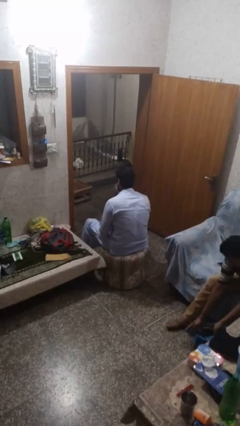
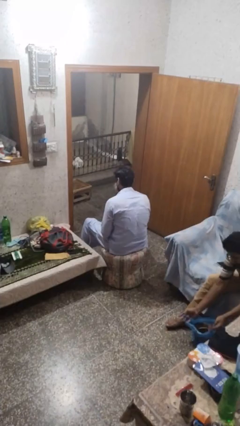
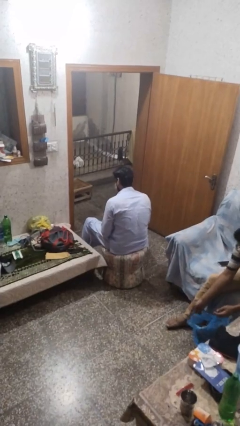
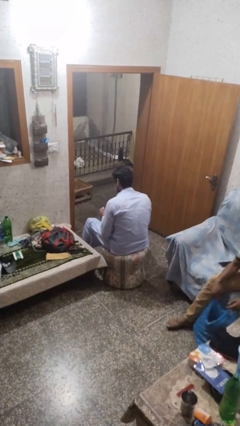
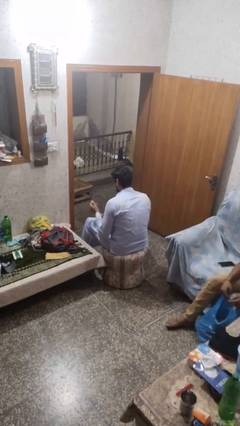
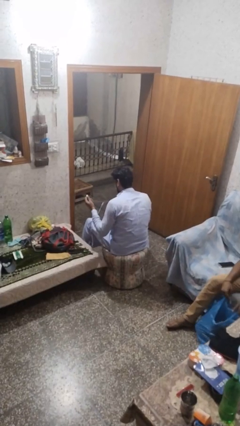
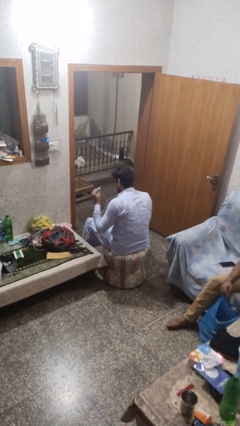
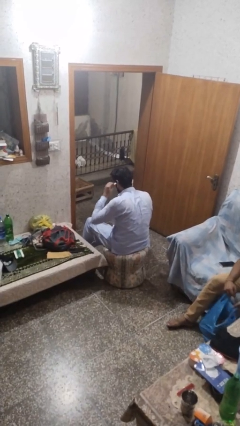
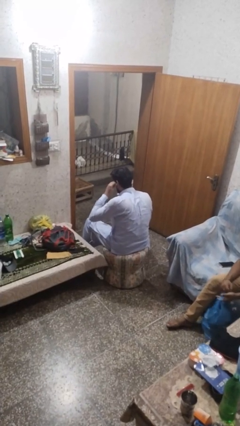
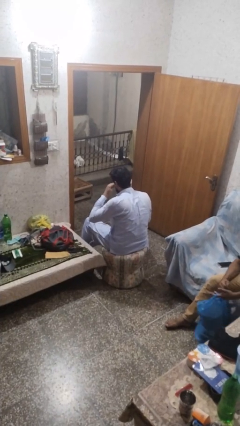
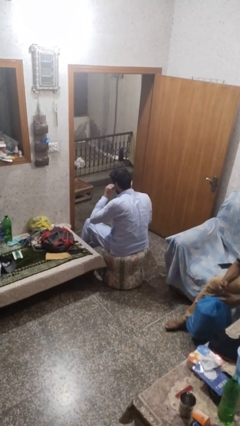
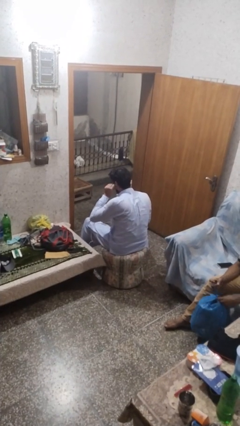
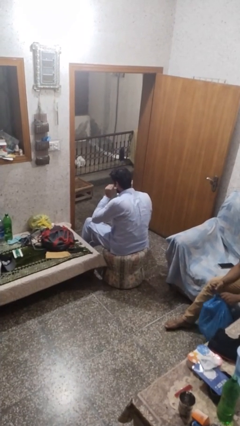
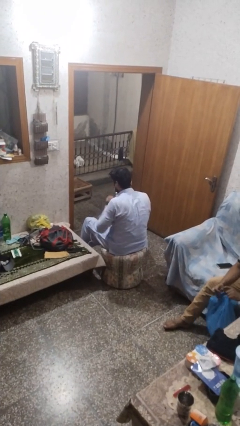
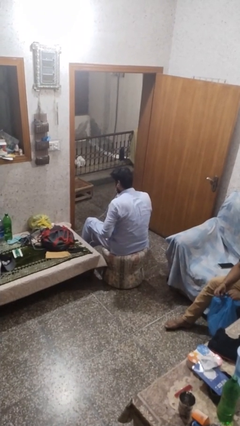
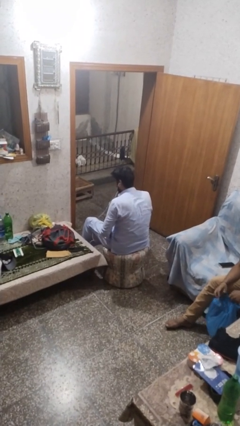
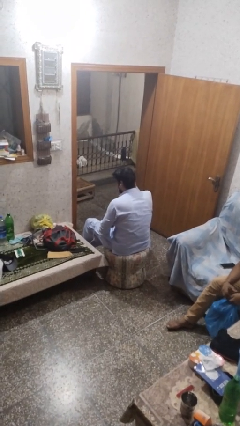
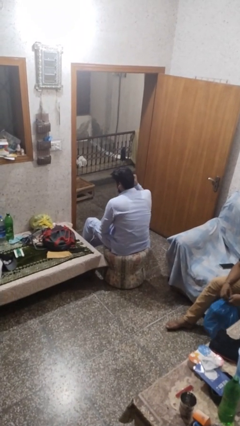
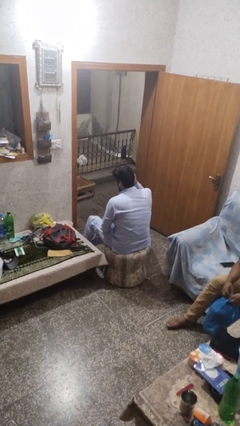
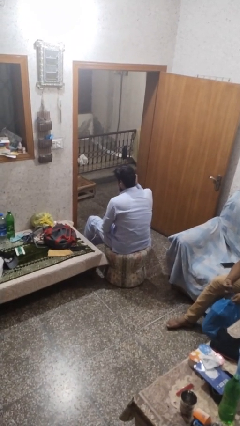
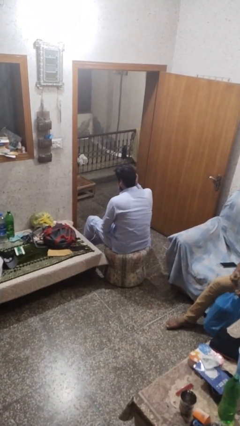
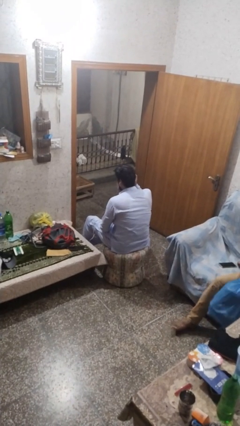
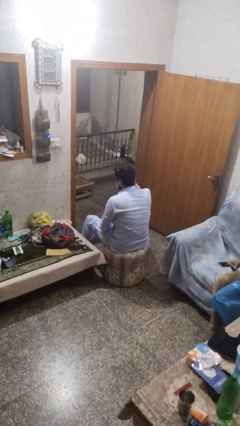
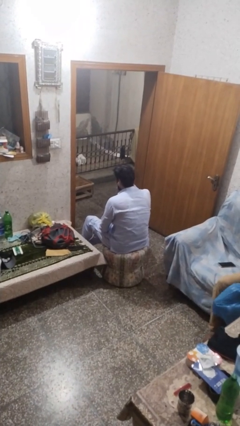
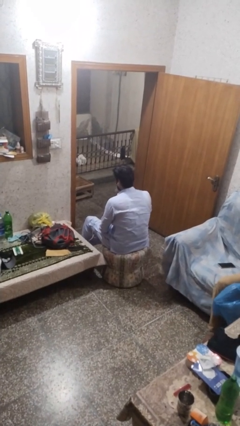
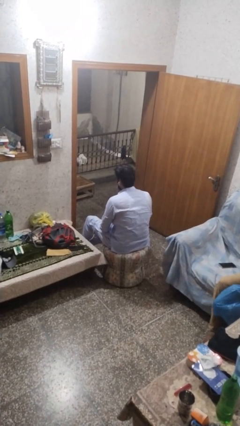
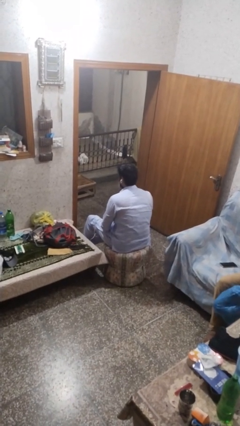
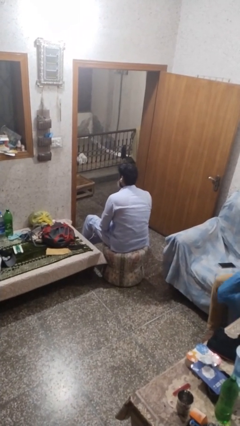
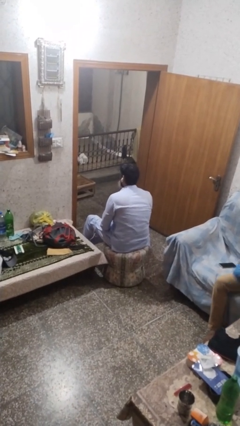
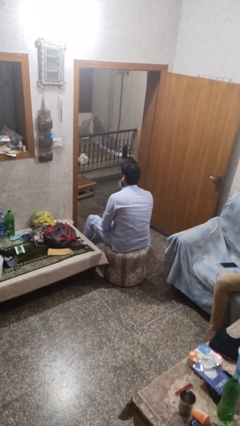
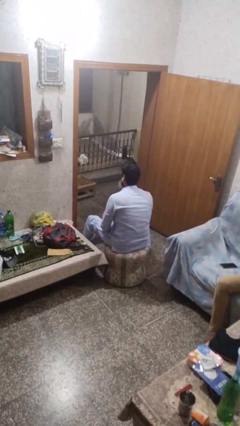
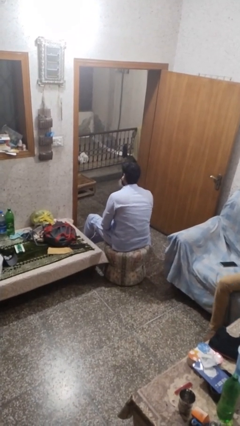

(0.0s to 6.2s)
person puts on headphones

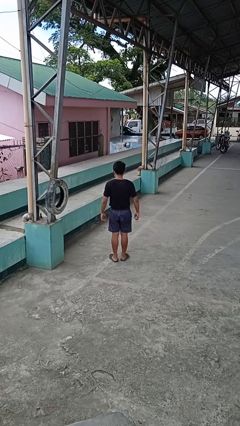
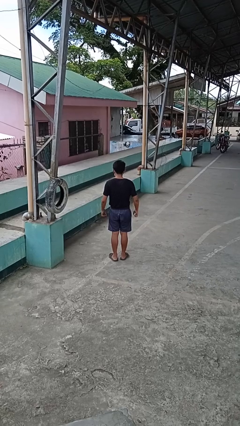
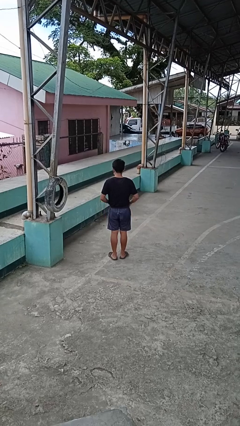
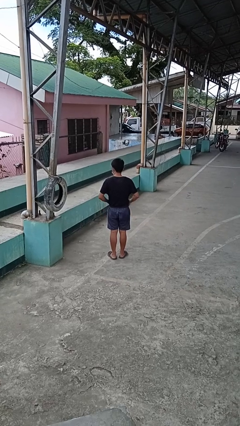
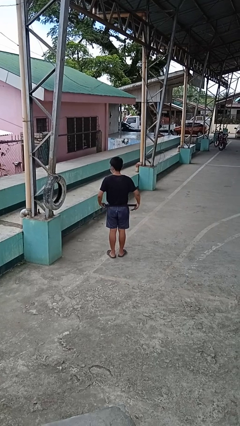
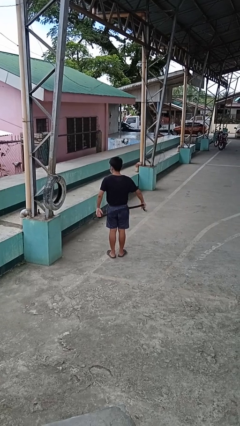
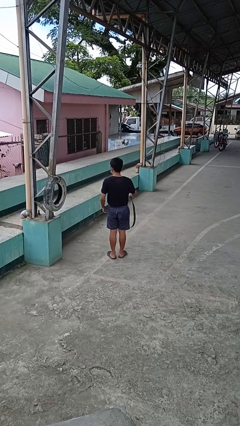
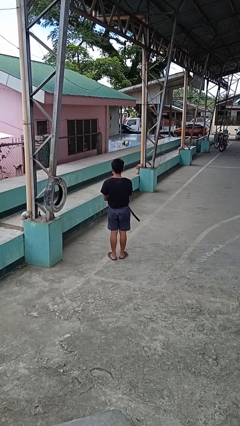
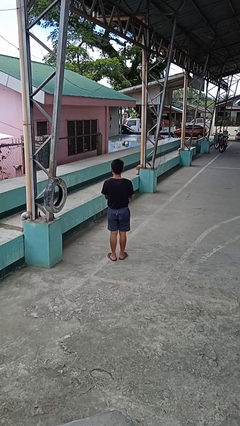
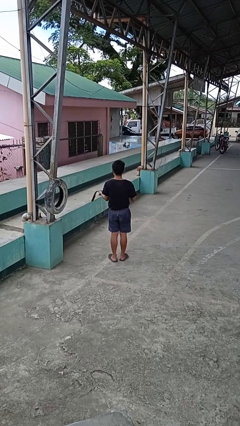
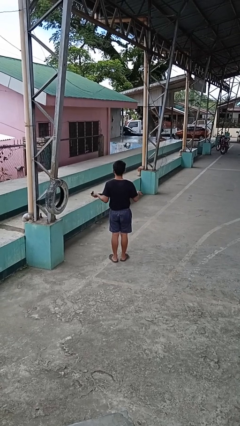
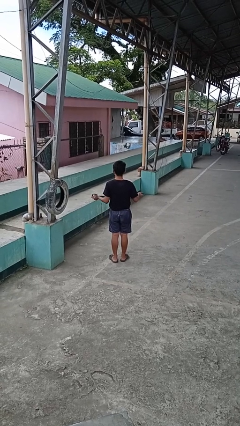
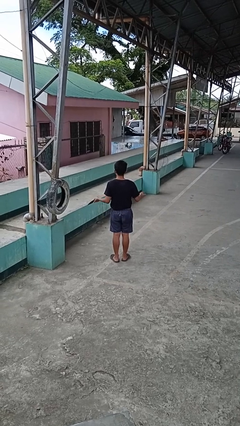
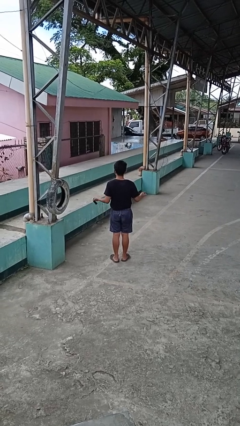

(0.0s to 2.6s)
person takes off belt

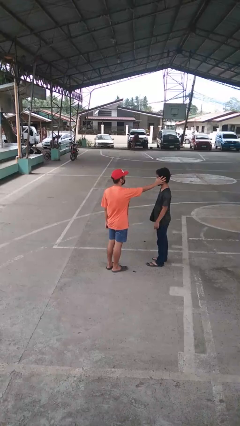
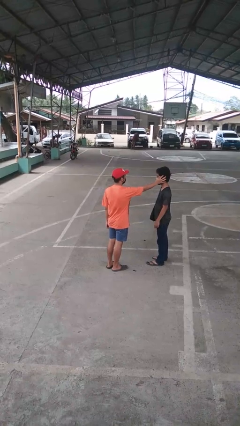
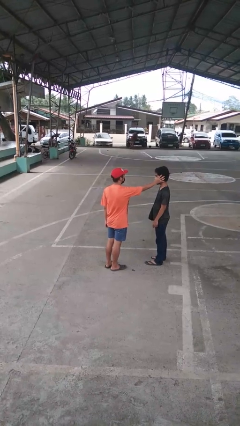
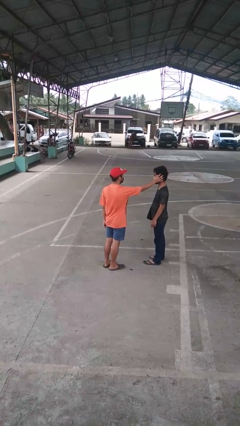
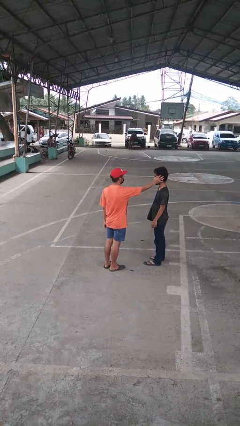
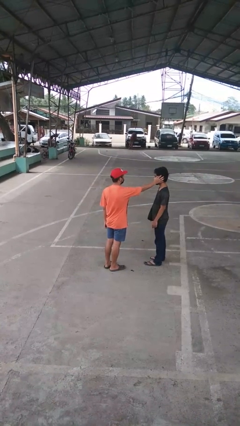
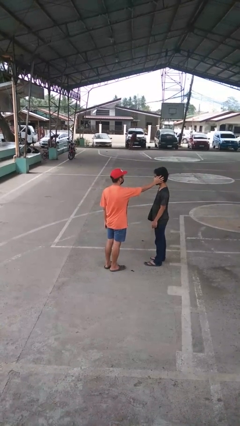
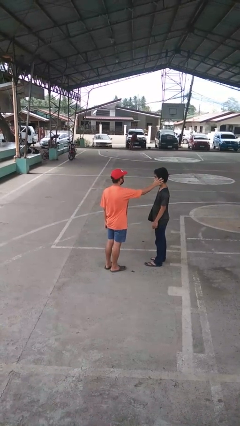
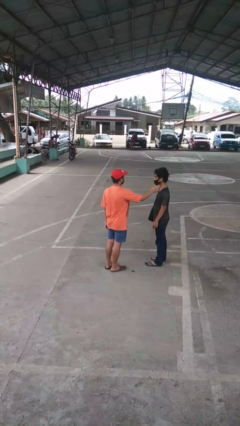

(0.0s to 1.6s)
person touches face of person

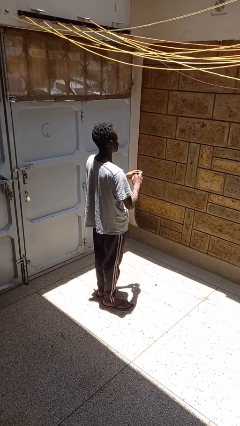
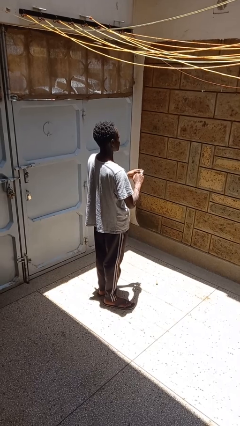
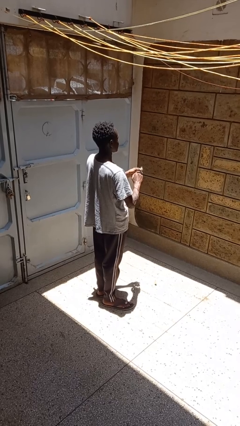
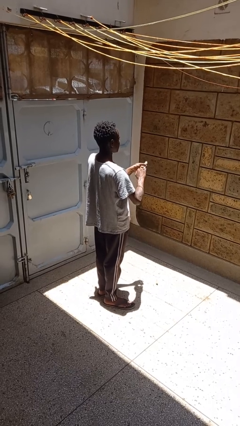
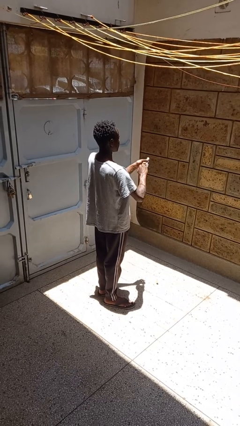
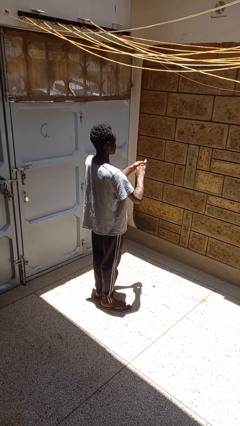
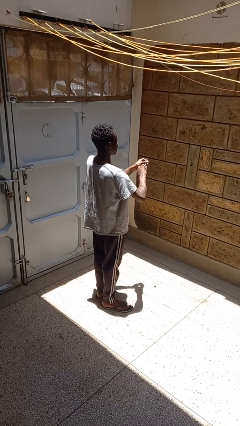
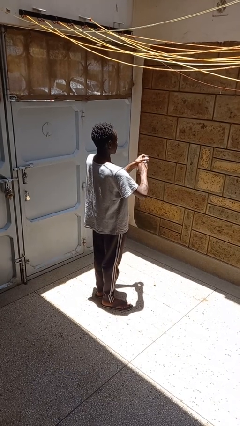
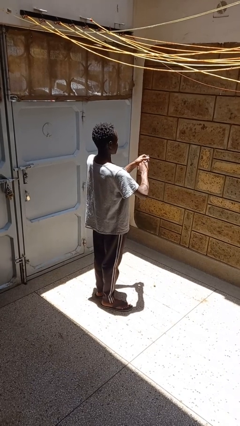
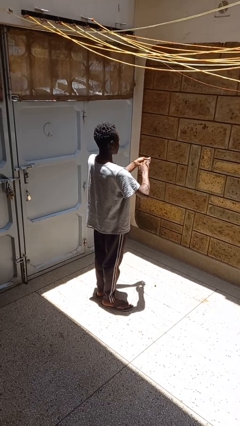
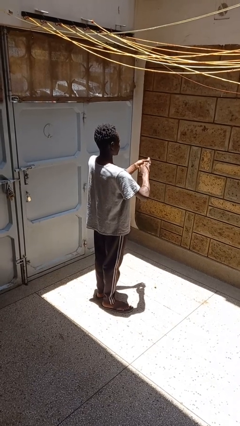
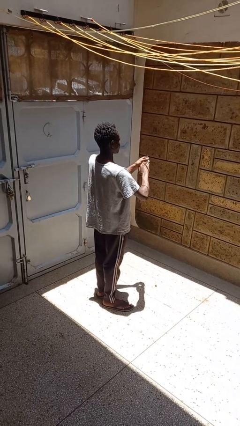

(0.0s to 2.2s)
person clips fingernails

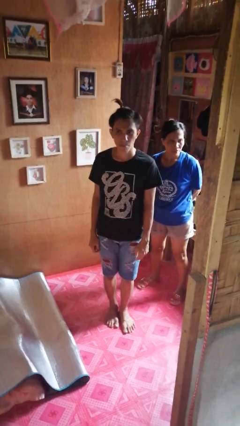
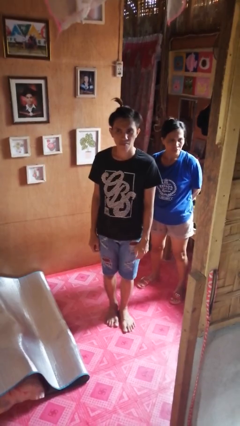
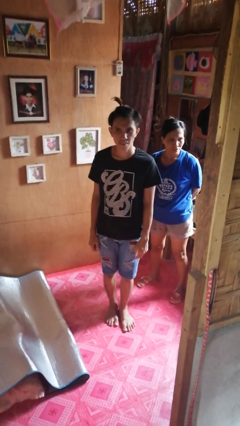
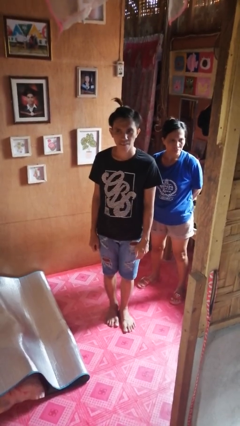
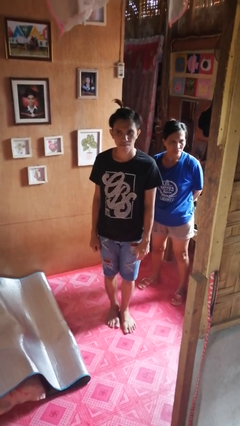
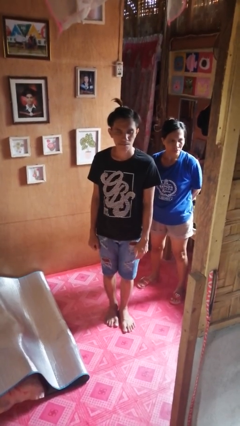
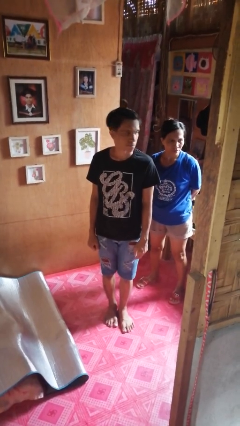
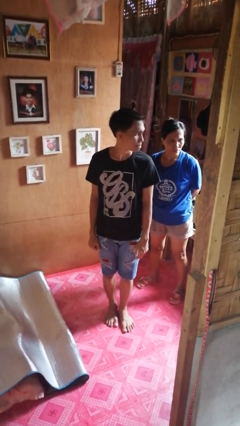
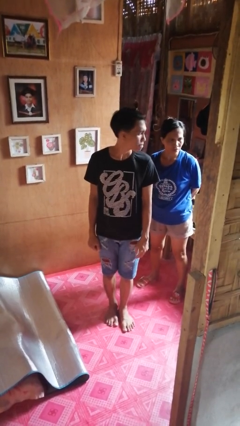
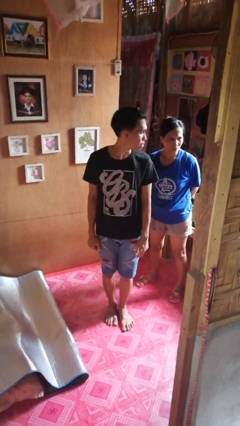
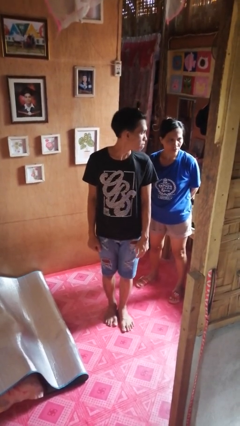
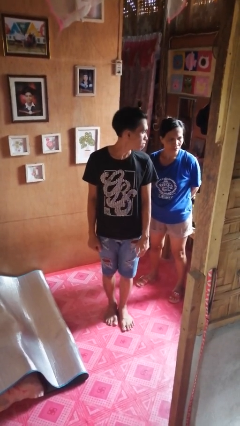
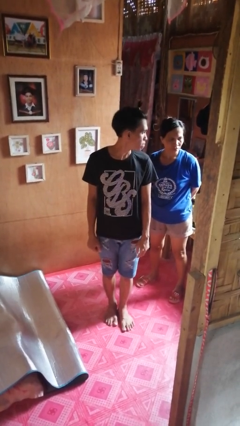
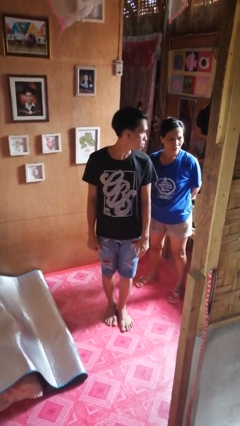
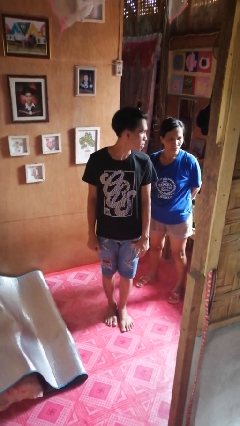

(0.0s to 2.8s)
person looks over shoulder

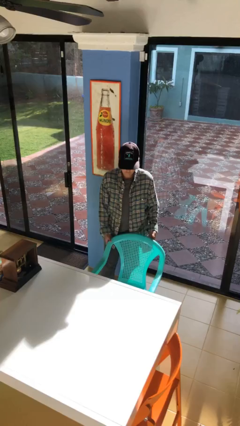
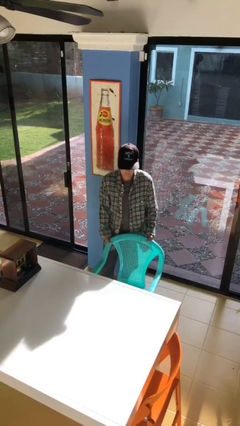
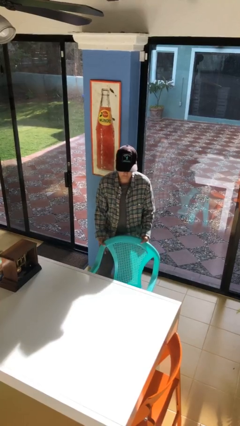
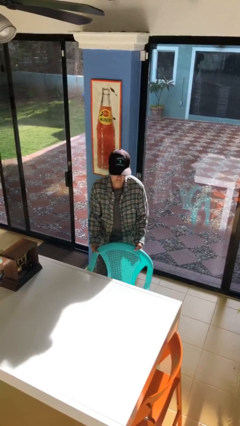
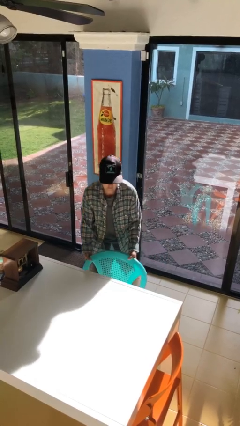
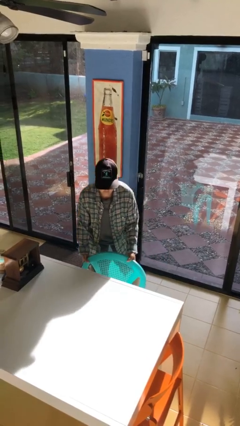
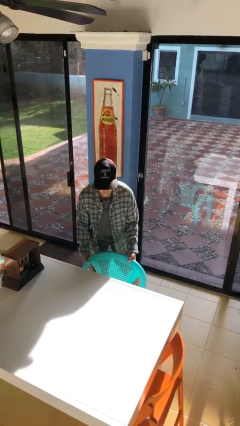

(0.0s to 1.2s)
person pushes in chair

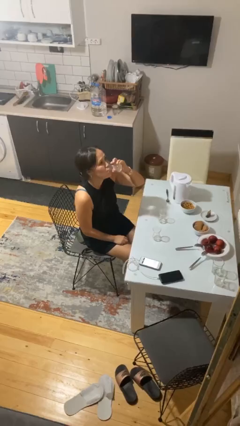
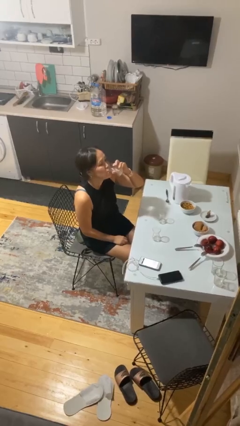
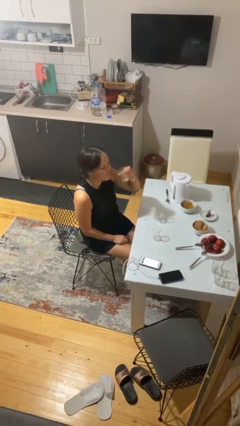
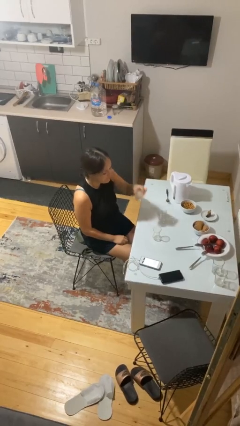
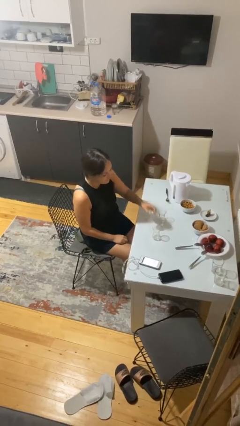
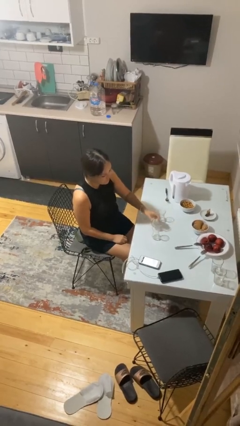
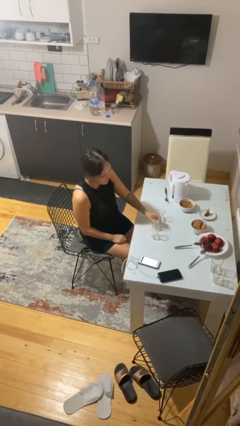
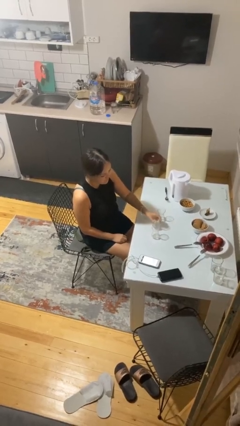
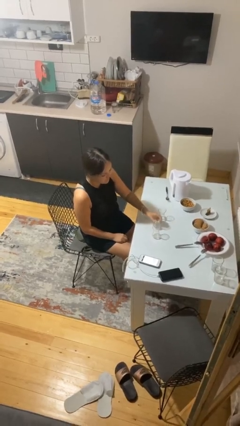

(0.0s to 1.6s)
person puts down object on table
